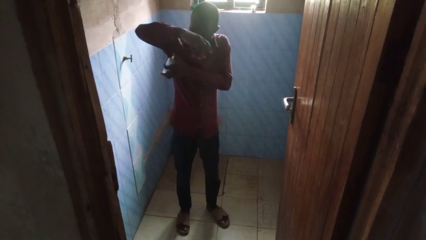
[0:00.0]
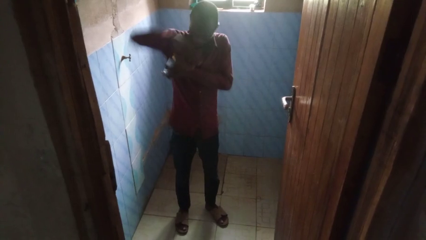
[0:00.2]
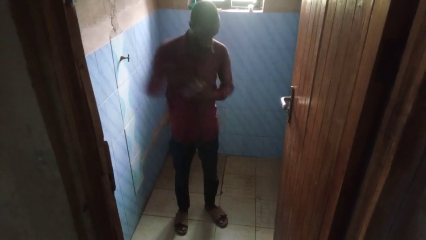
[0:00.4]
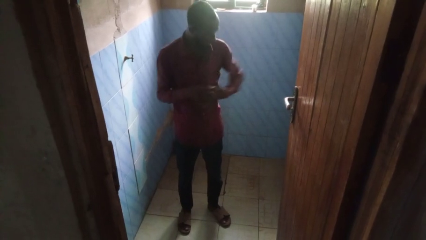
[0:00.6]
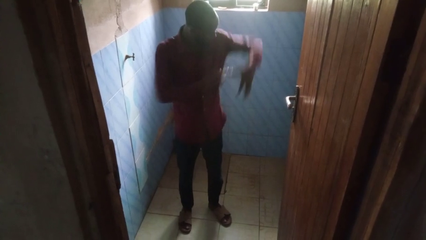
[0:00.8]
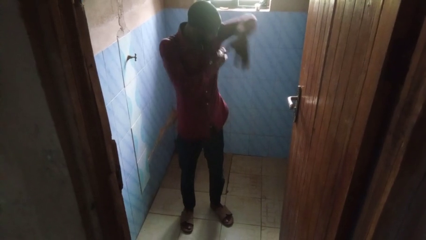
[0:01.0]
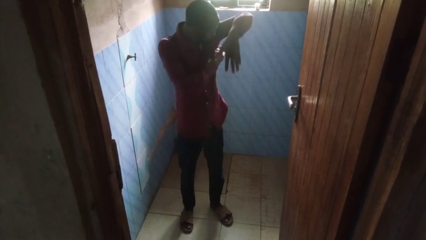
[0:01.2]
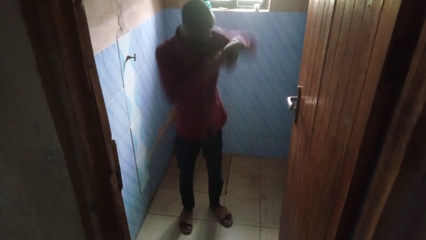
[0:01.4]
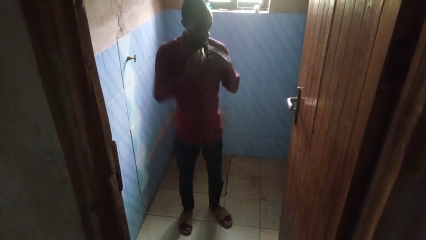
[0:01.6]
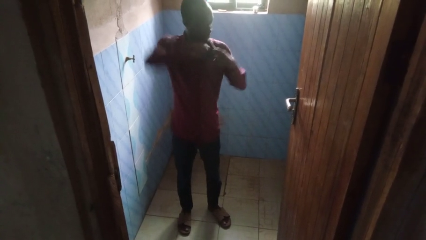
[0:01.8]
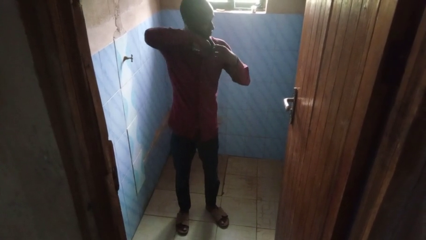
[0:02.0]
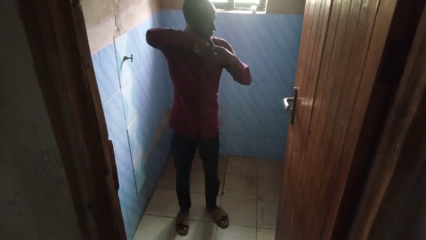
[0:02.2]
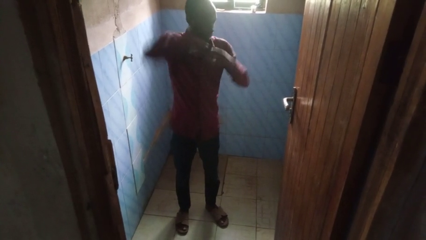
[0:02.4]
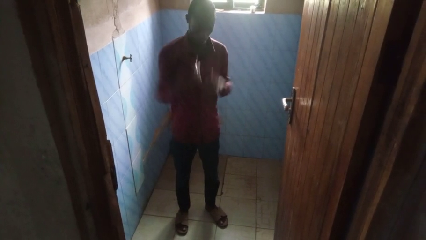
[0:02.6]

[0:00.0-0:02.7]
person applies deodorant

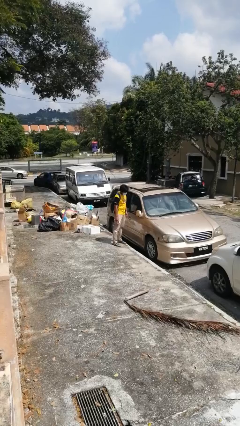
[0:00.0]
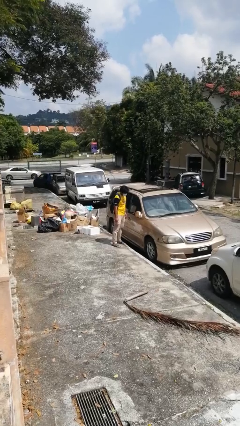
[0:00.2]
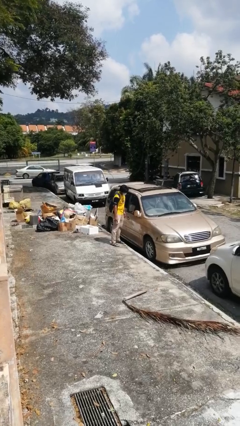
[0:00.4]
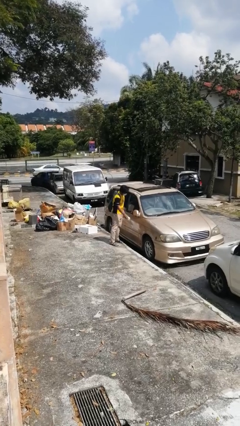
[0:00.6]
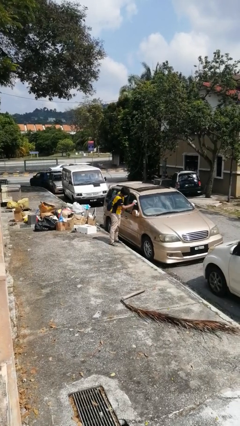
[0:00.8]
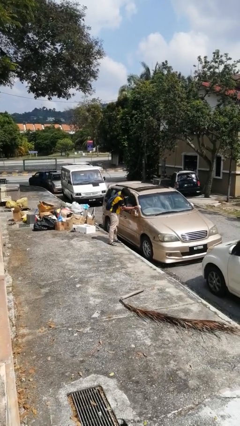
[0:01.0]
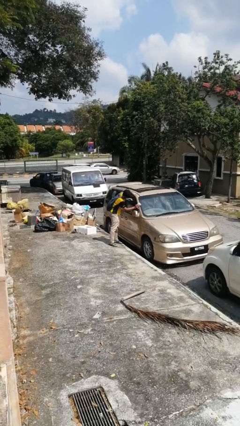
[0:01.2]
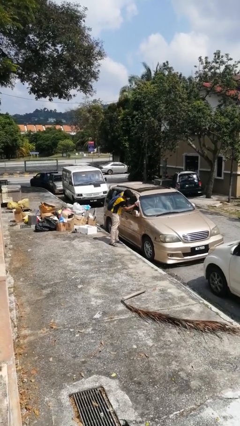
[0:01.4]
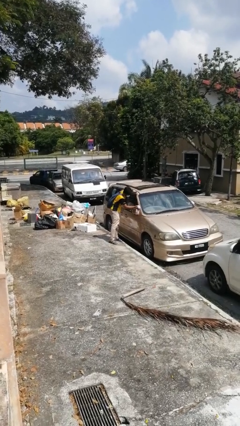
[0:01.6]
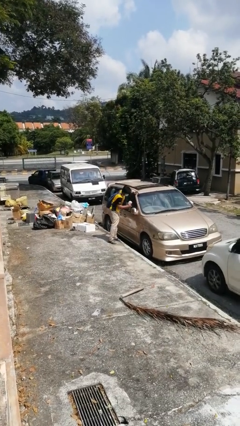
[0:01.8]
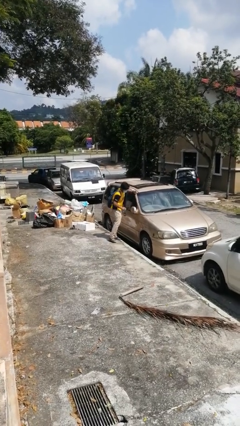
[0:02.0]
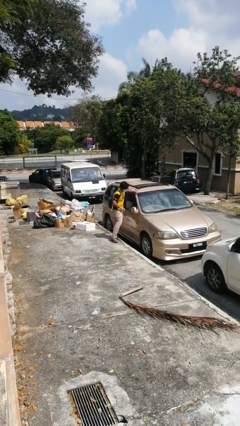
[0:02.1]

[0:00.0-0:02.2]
person polishes car with rag

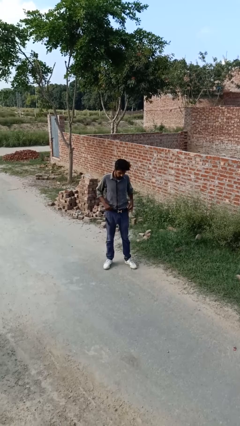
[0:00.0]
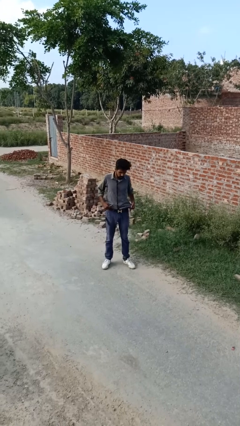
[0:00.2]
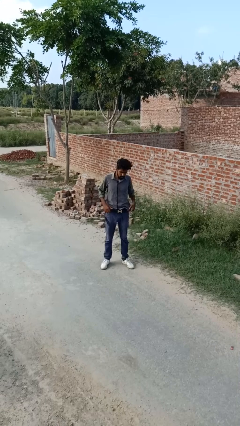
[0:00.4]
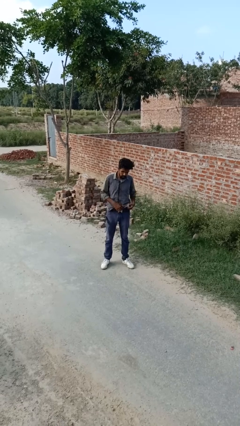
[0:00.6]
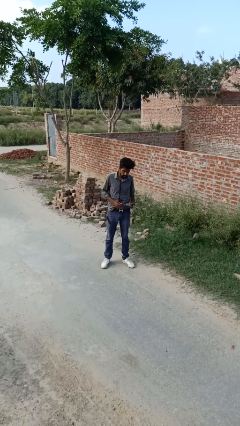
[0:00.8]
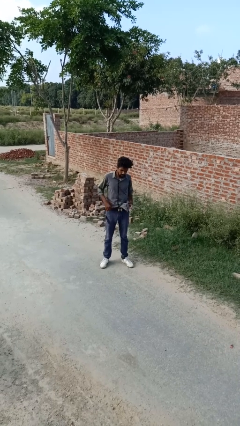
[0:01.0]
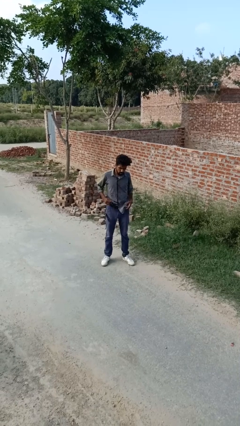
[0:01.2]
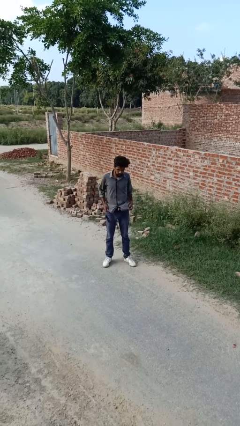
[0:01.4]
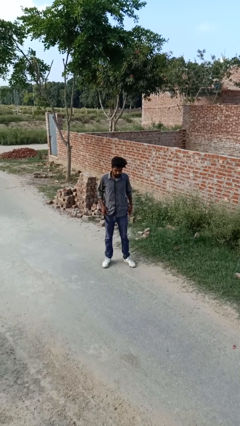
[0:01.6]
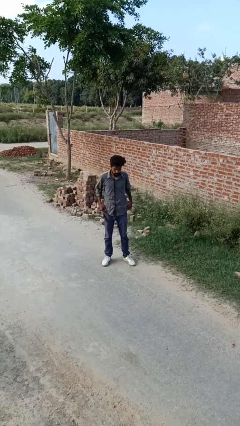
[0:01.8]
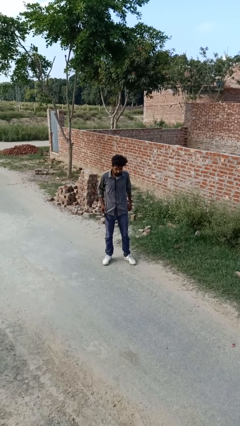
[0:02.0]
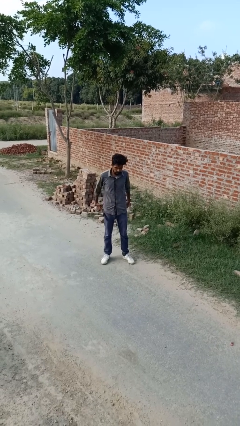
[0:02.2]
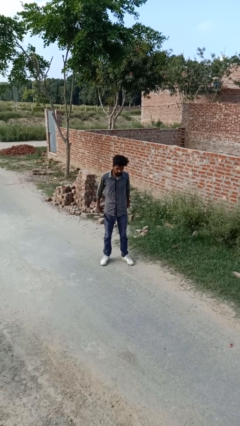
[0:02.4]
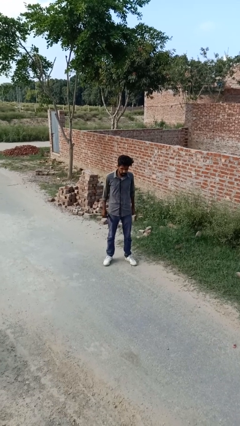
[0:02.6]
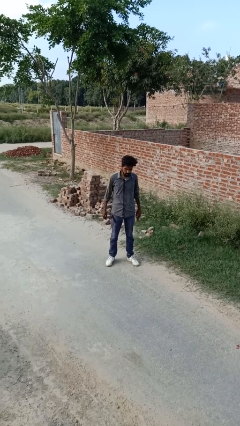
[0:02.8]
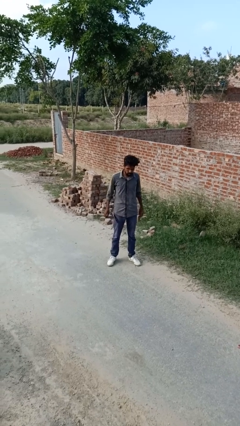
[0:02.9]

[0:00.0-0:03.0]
person untucks shirt

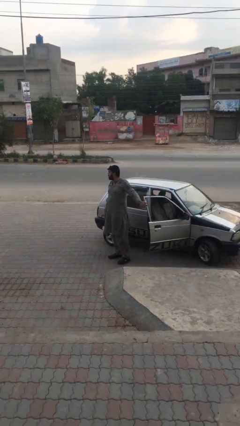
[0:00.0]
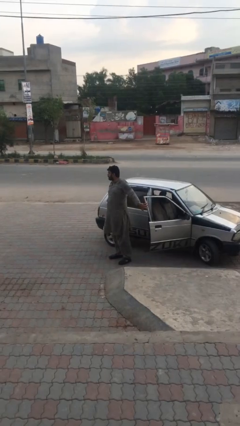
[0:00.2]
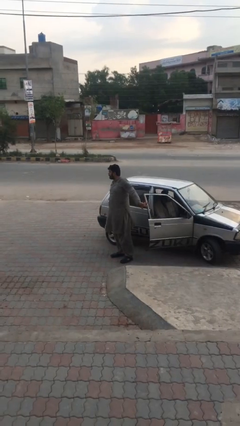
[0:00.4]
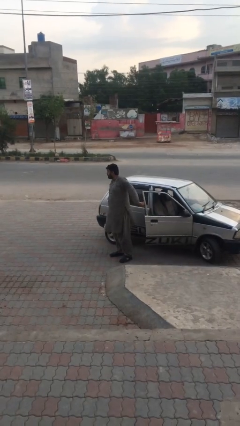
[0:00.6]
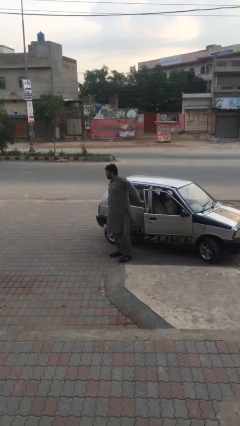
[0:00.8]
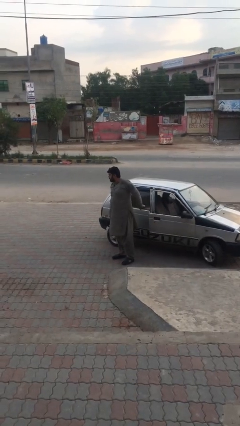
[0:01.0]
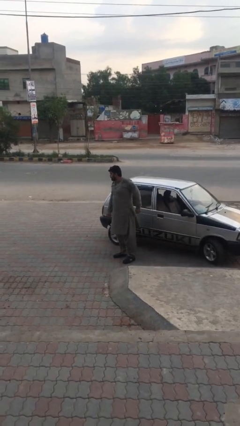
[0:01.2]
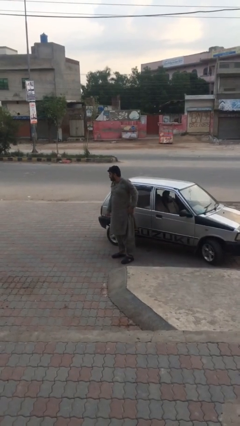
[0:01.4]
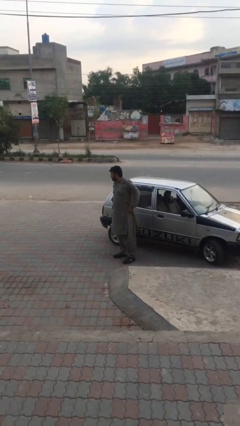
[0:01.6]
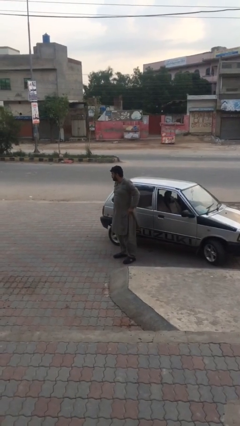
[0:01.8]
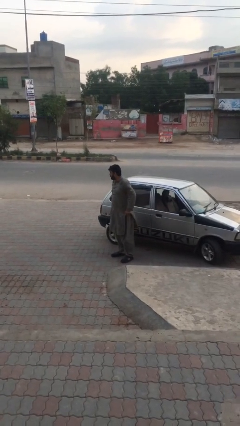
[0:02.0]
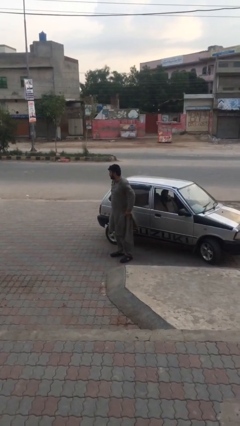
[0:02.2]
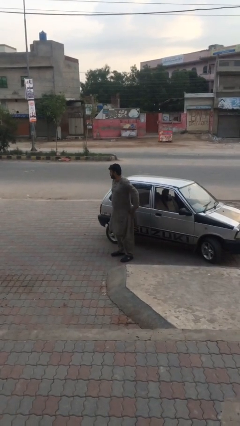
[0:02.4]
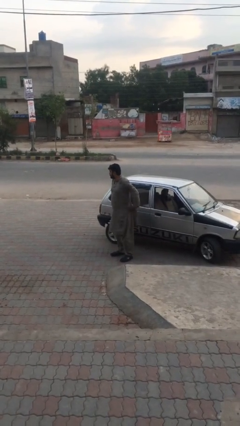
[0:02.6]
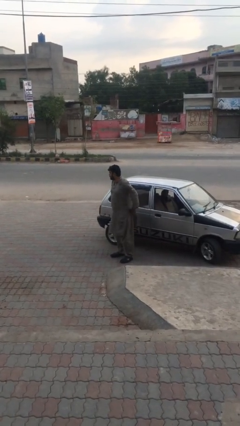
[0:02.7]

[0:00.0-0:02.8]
person closes car door

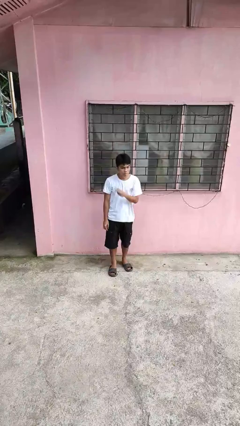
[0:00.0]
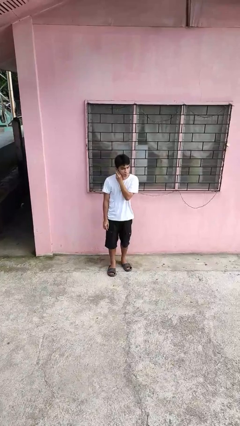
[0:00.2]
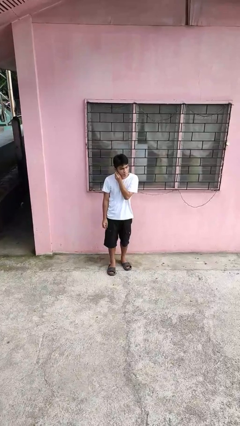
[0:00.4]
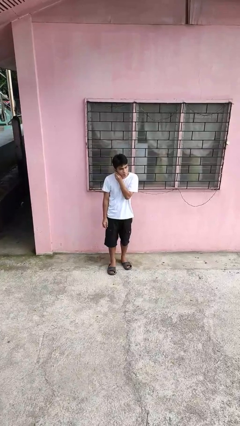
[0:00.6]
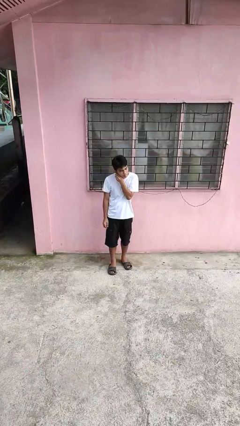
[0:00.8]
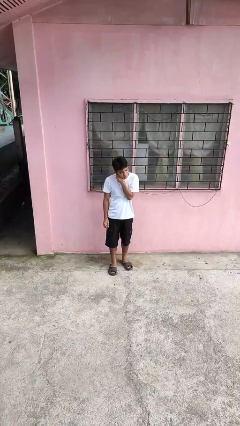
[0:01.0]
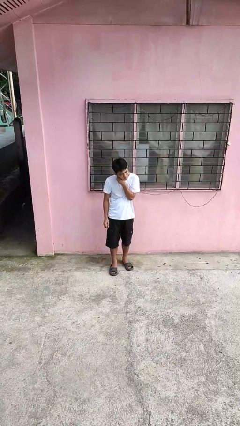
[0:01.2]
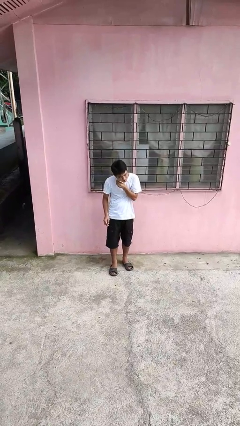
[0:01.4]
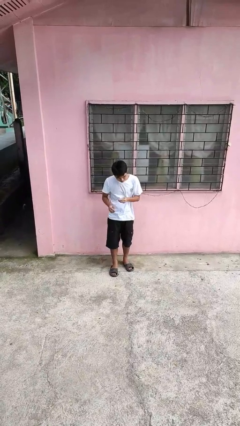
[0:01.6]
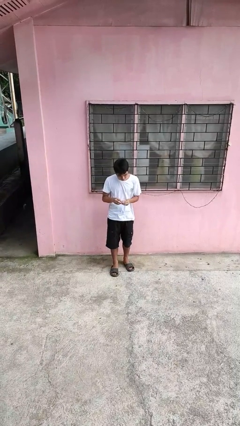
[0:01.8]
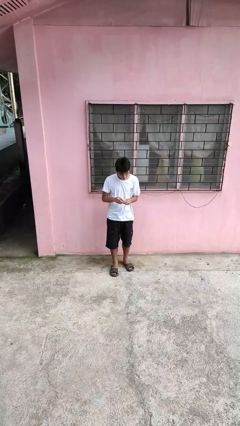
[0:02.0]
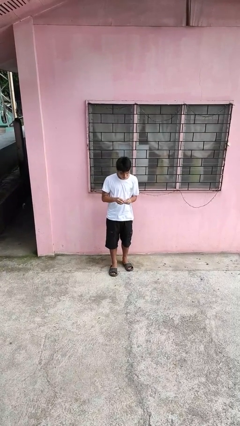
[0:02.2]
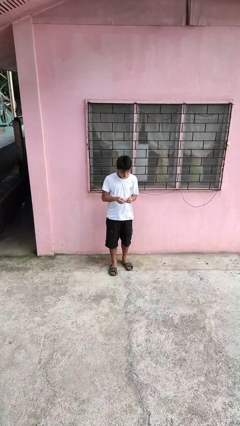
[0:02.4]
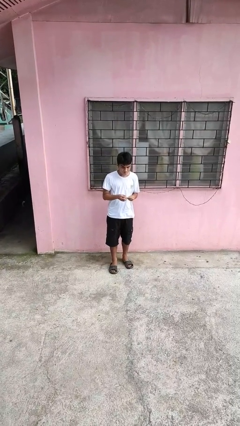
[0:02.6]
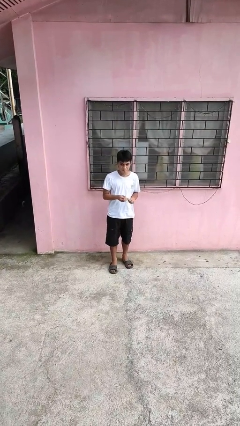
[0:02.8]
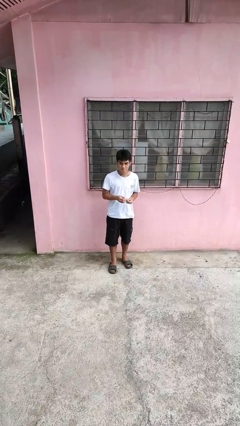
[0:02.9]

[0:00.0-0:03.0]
person takes off earrings

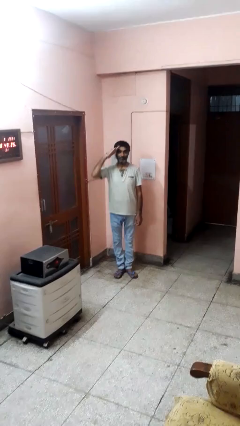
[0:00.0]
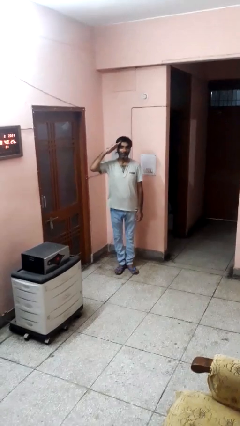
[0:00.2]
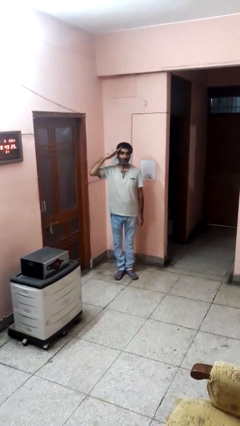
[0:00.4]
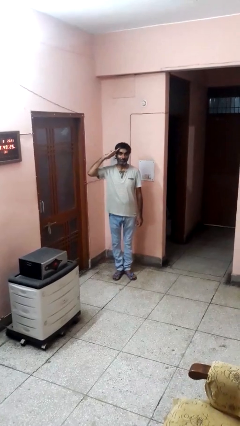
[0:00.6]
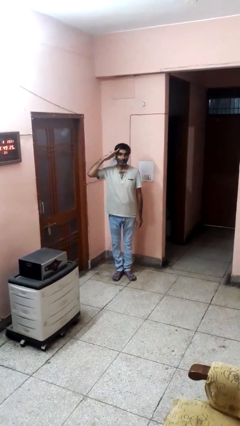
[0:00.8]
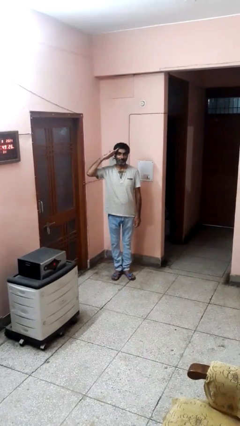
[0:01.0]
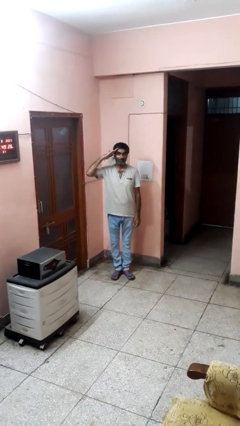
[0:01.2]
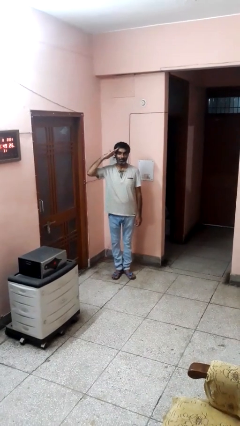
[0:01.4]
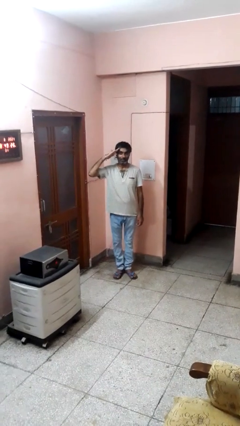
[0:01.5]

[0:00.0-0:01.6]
person salutes

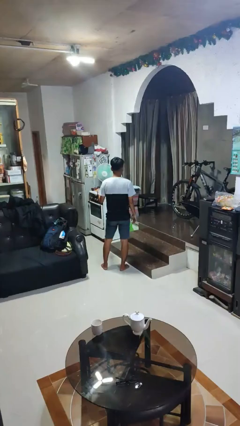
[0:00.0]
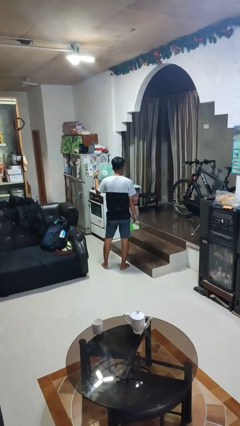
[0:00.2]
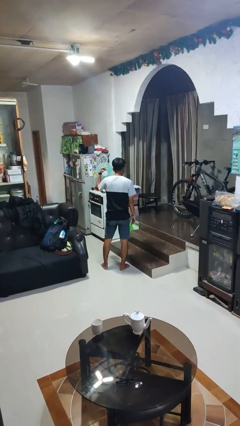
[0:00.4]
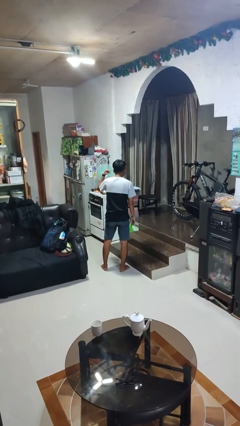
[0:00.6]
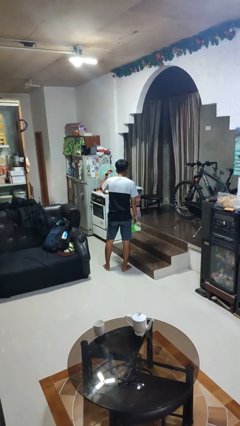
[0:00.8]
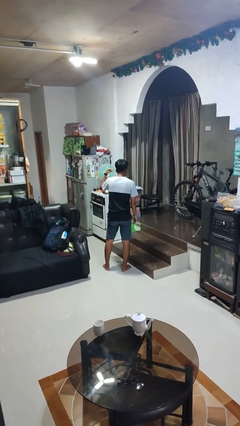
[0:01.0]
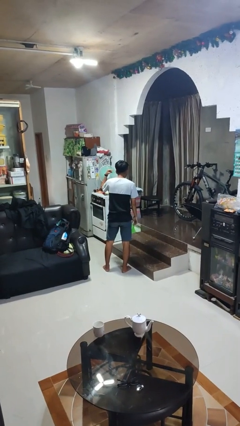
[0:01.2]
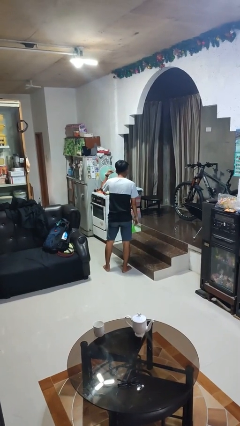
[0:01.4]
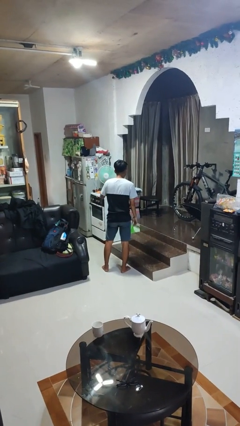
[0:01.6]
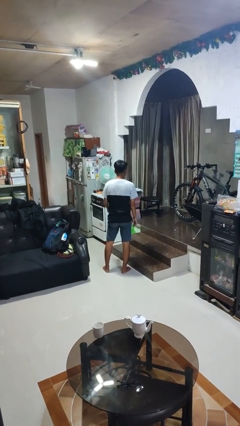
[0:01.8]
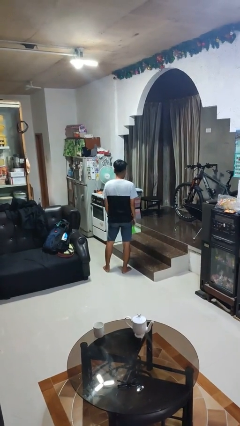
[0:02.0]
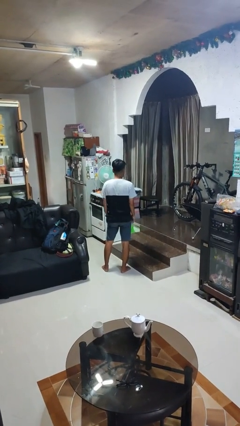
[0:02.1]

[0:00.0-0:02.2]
person gestures listen closely
